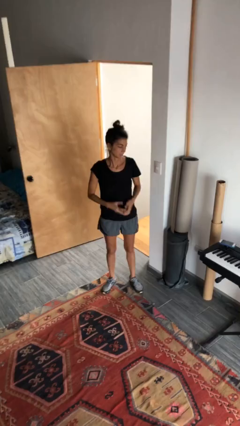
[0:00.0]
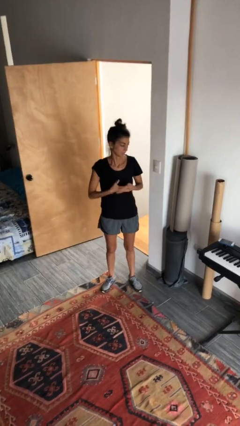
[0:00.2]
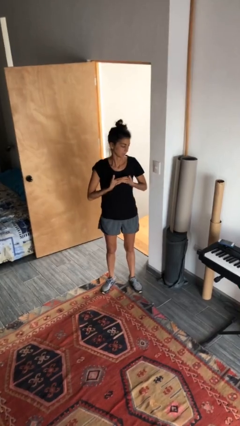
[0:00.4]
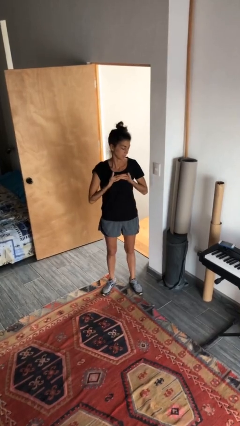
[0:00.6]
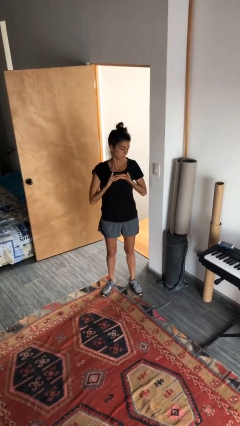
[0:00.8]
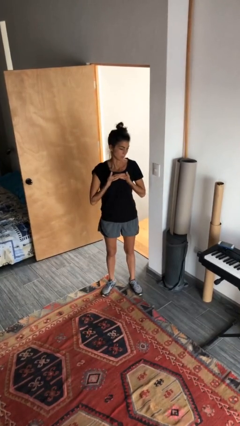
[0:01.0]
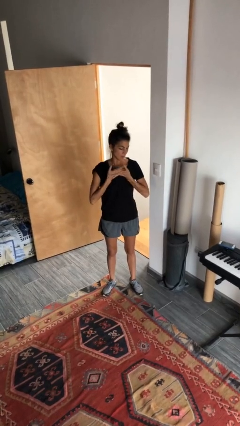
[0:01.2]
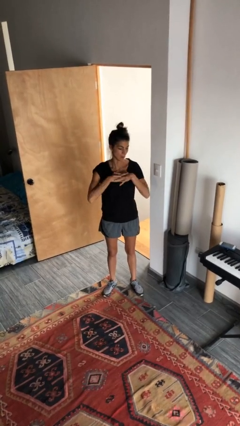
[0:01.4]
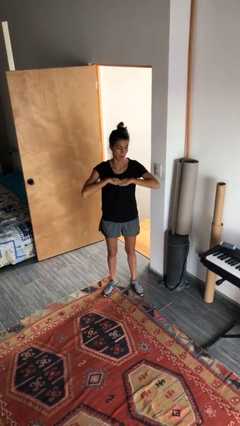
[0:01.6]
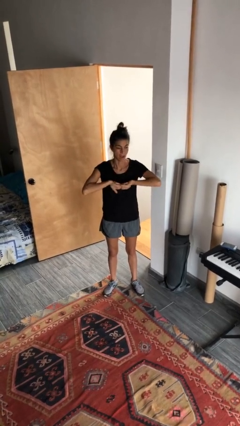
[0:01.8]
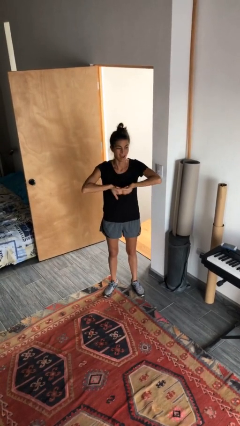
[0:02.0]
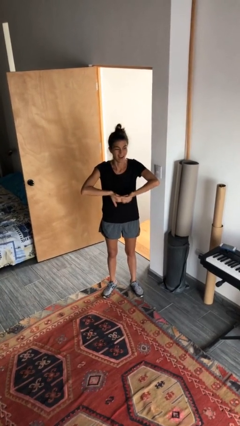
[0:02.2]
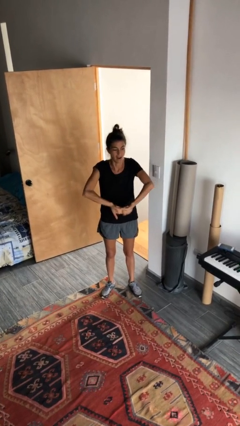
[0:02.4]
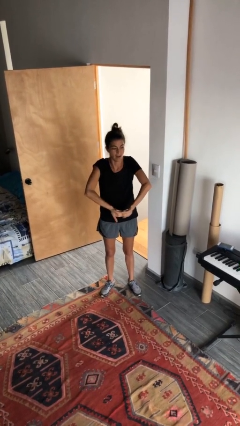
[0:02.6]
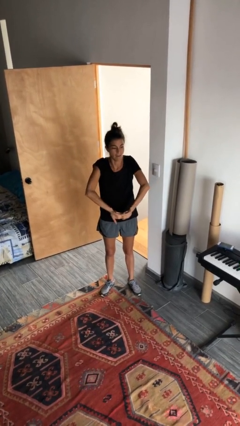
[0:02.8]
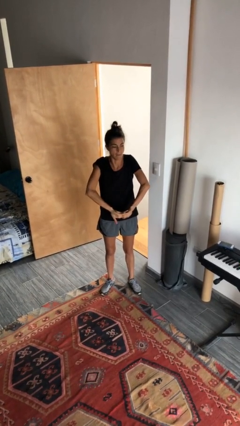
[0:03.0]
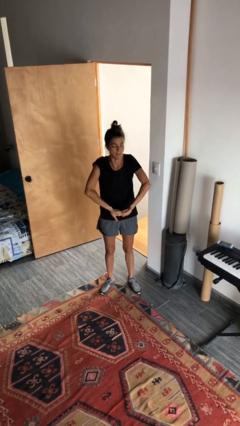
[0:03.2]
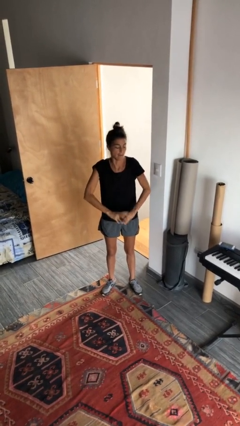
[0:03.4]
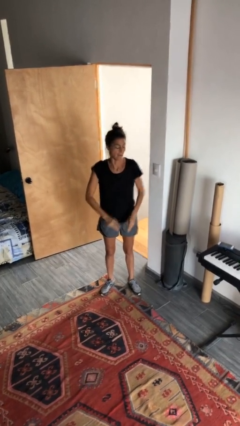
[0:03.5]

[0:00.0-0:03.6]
person cracks knuckles

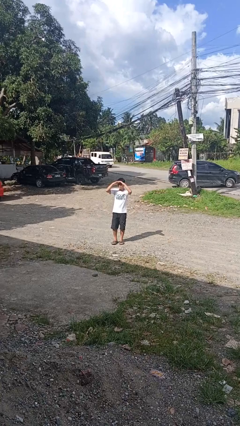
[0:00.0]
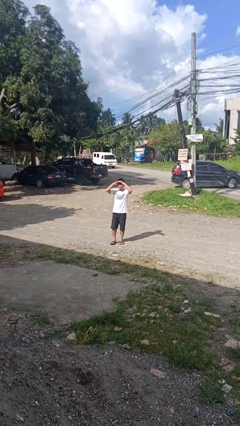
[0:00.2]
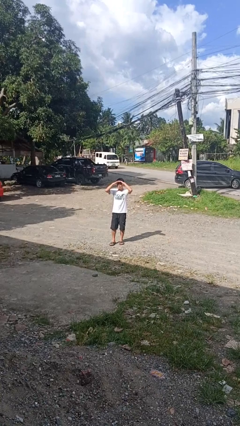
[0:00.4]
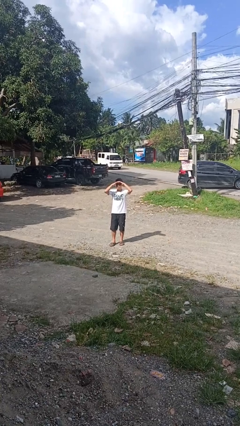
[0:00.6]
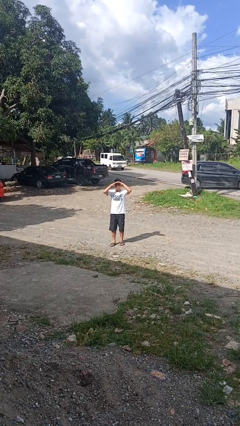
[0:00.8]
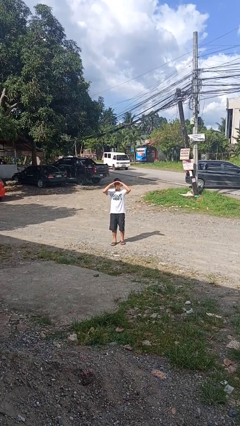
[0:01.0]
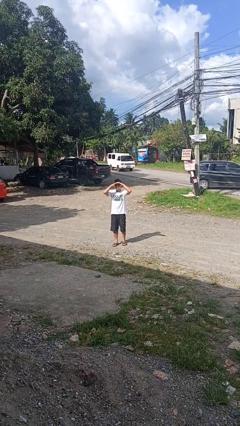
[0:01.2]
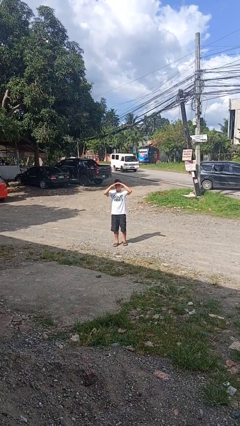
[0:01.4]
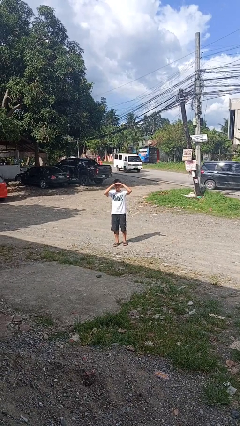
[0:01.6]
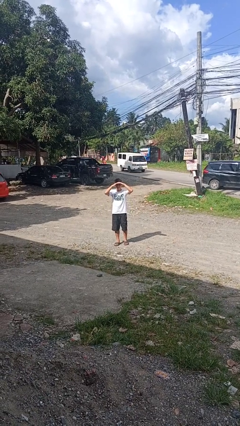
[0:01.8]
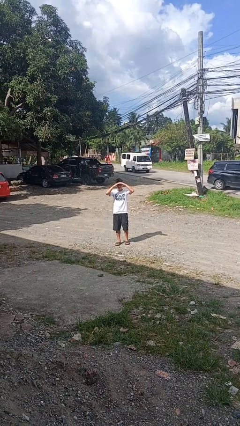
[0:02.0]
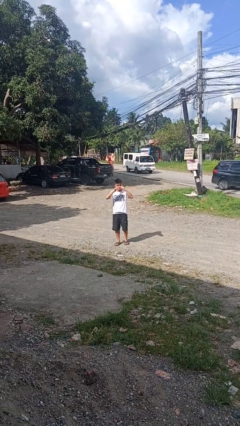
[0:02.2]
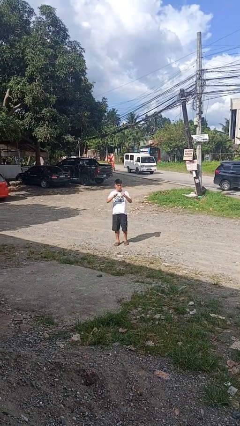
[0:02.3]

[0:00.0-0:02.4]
person shades eyes

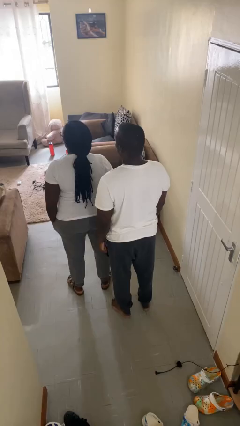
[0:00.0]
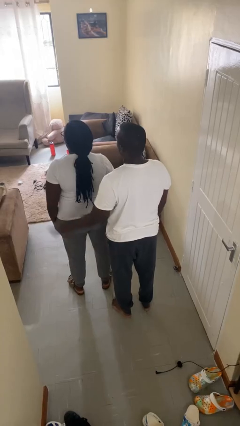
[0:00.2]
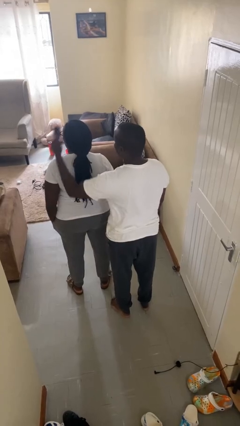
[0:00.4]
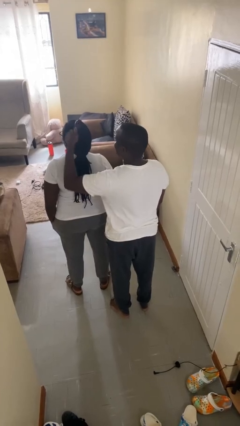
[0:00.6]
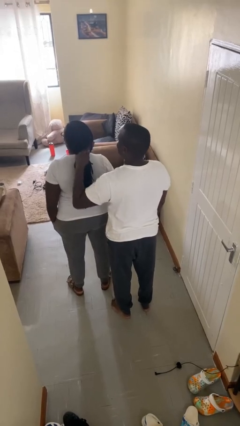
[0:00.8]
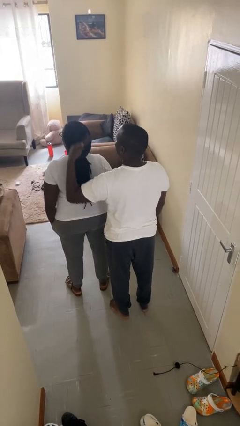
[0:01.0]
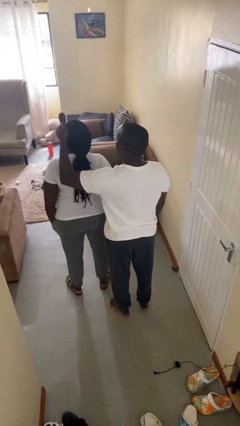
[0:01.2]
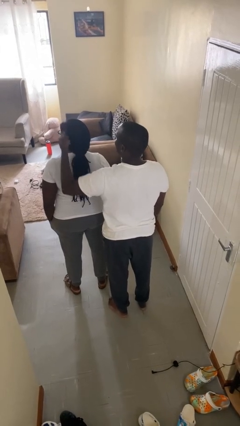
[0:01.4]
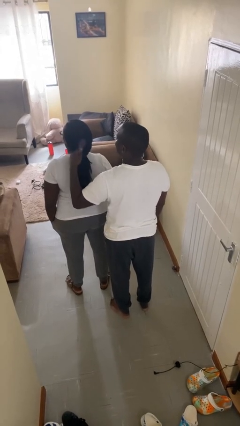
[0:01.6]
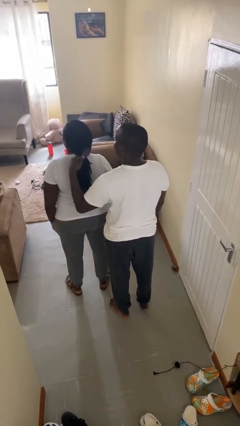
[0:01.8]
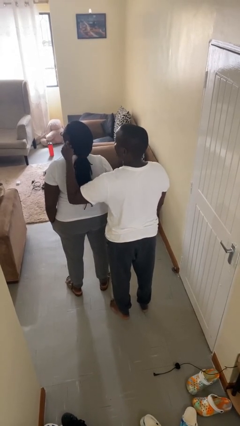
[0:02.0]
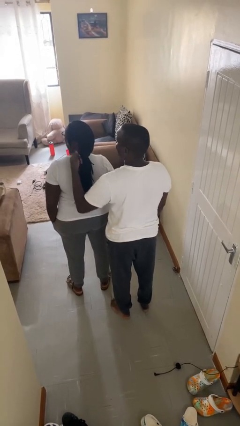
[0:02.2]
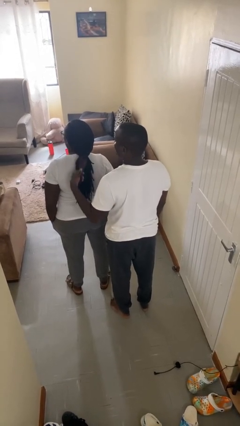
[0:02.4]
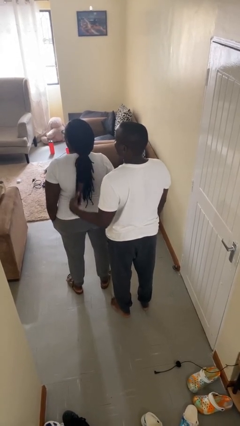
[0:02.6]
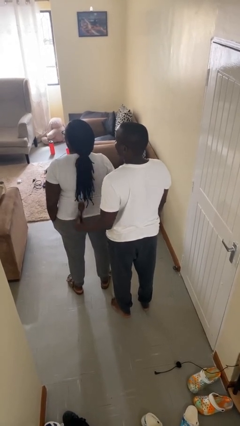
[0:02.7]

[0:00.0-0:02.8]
person brushes hair of person

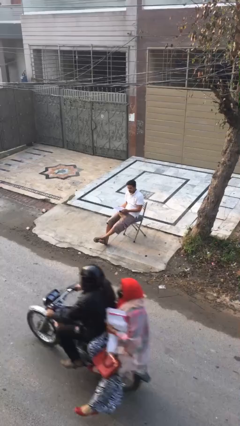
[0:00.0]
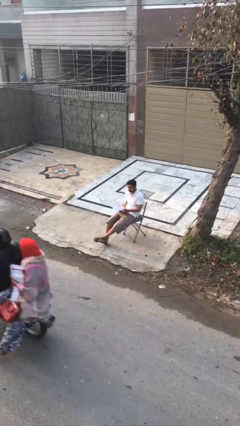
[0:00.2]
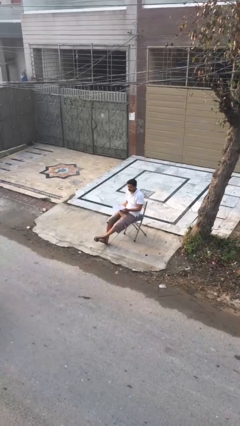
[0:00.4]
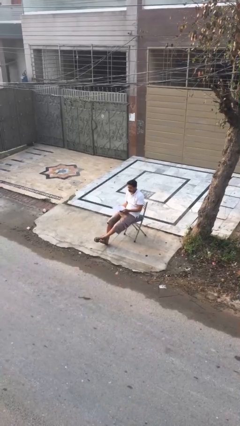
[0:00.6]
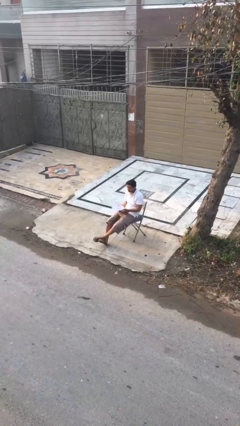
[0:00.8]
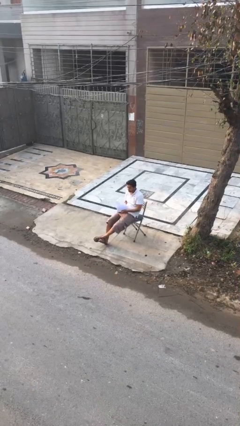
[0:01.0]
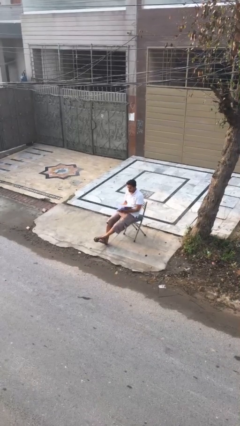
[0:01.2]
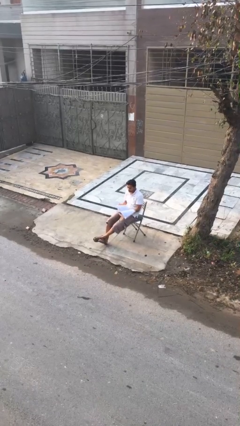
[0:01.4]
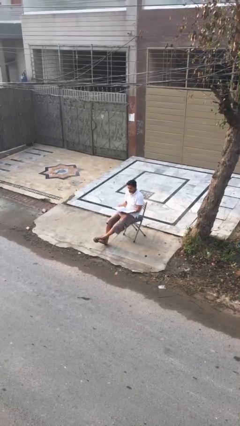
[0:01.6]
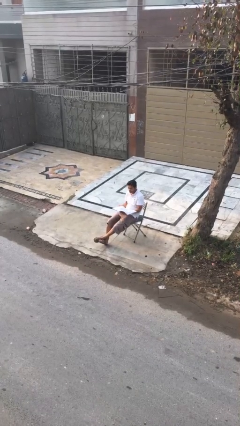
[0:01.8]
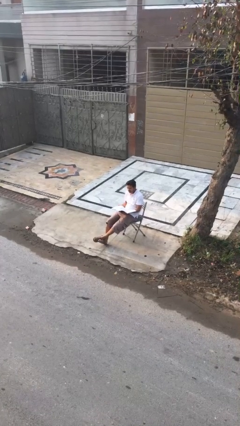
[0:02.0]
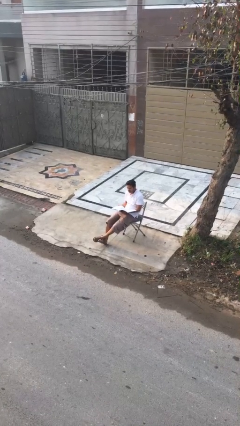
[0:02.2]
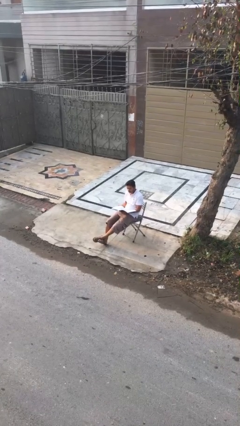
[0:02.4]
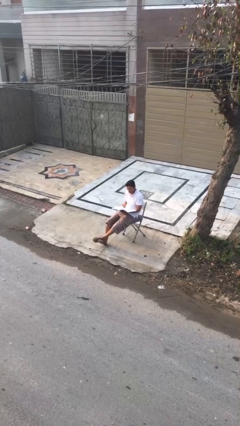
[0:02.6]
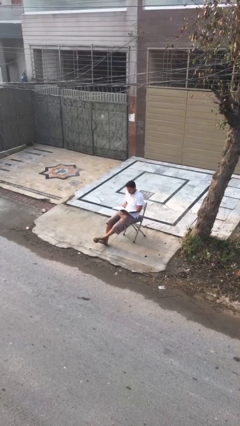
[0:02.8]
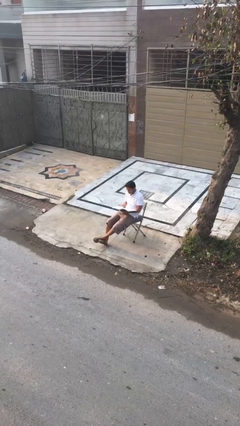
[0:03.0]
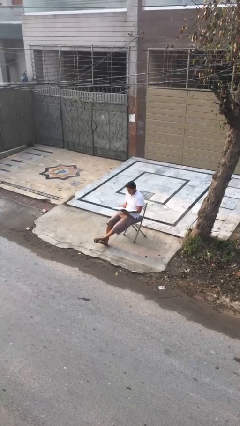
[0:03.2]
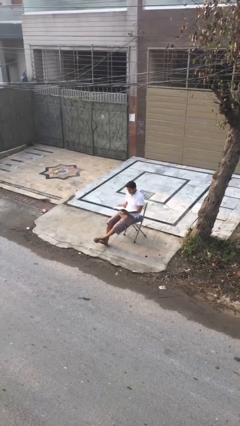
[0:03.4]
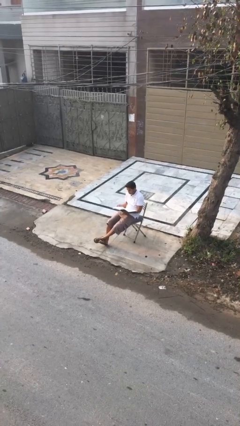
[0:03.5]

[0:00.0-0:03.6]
person reads document

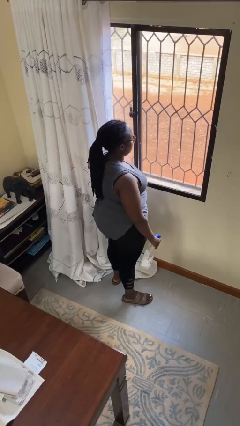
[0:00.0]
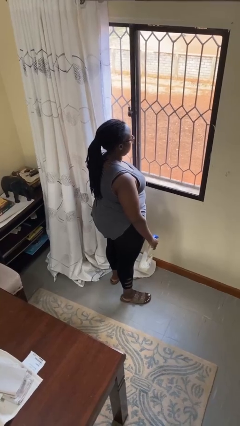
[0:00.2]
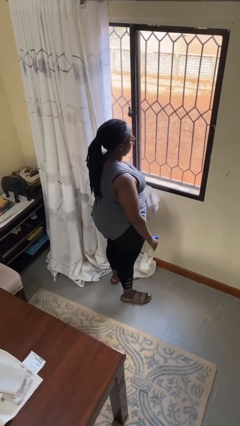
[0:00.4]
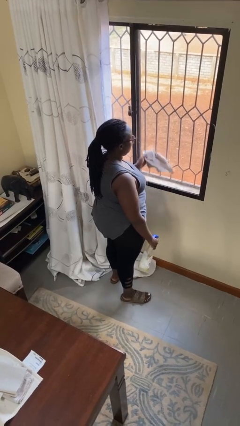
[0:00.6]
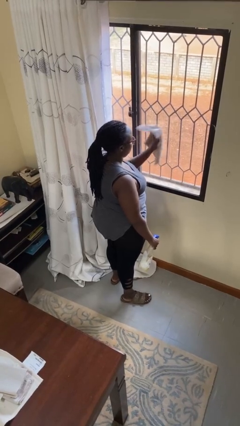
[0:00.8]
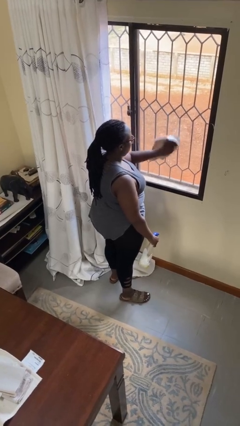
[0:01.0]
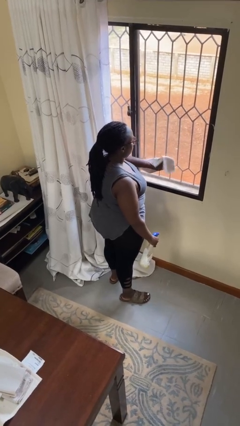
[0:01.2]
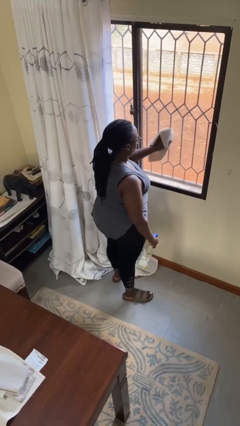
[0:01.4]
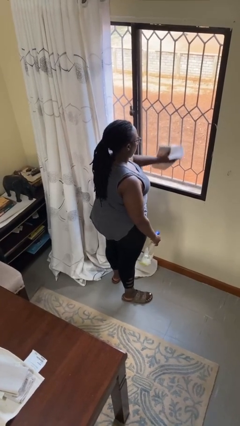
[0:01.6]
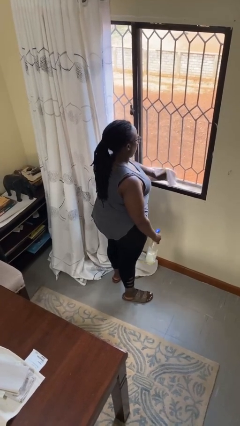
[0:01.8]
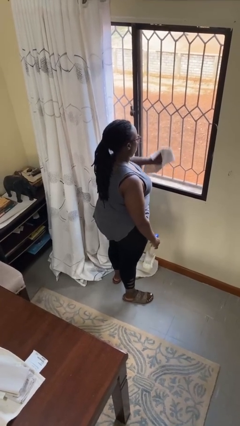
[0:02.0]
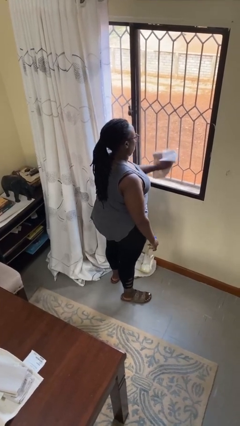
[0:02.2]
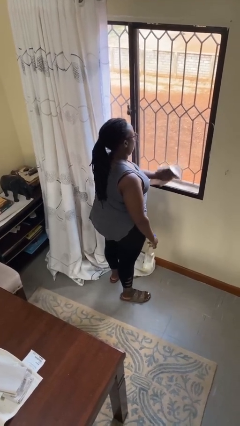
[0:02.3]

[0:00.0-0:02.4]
person washes window

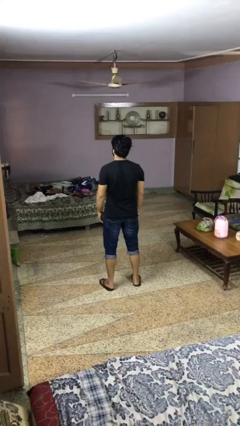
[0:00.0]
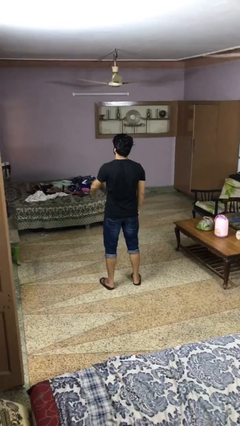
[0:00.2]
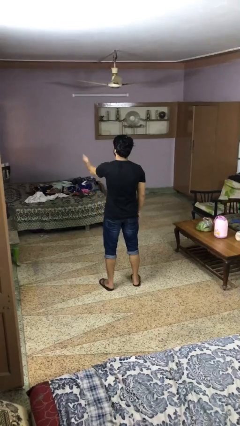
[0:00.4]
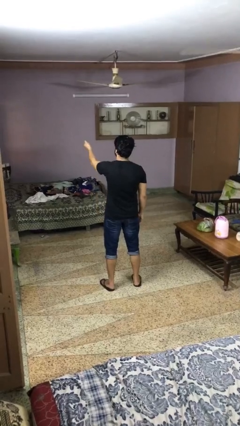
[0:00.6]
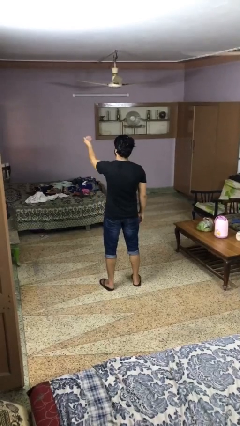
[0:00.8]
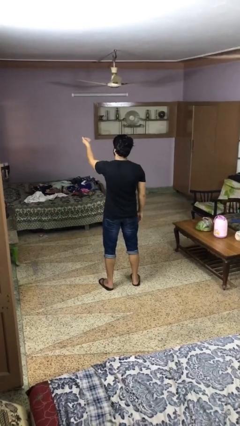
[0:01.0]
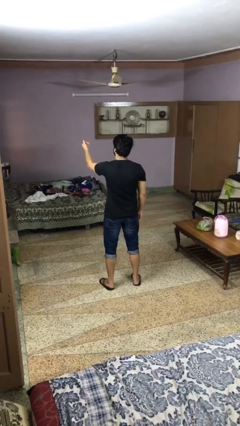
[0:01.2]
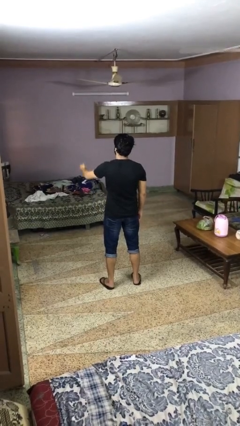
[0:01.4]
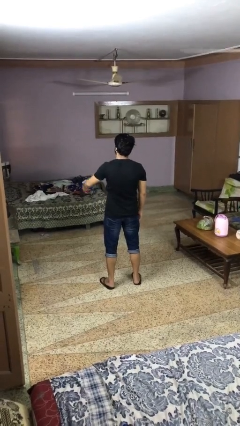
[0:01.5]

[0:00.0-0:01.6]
person gestures come here

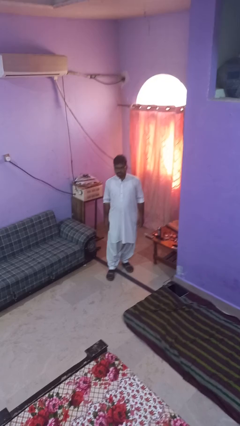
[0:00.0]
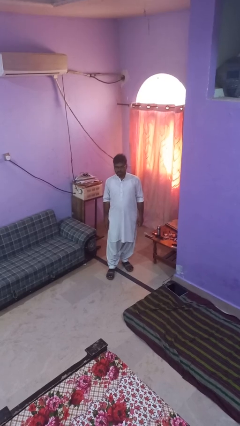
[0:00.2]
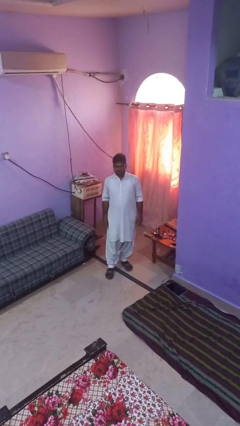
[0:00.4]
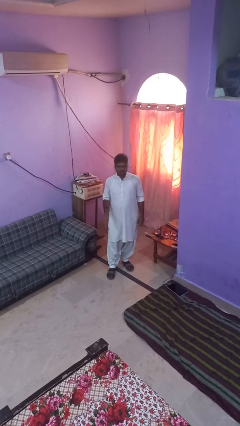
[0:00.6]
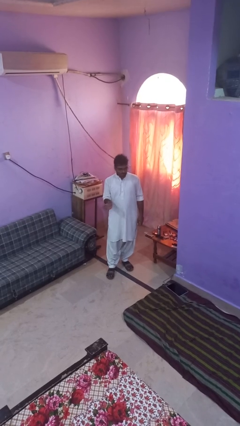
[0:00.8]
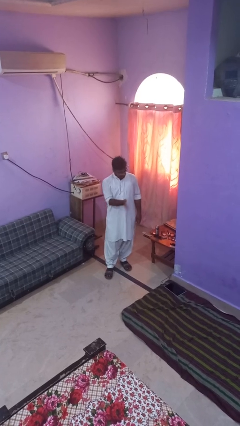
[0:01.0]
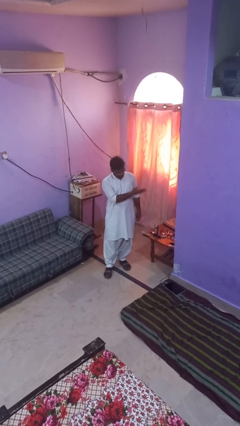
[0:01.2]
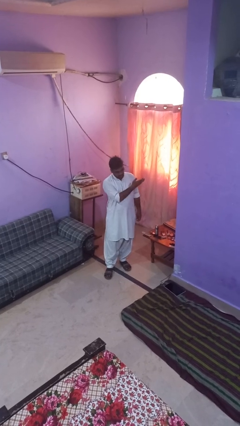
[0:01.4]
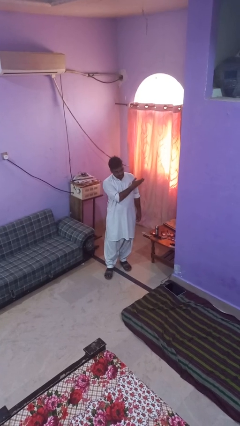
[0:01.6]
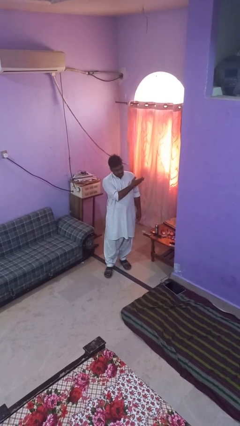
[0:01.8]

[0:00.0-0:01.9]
person gestures swipe left
